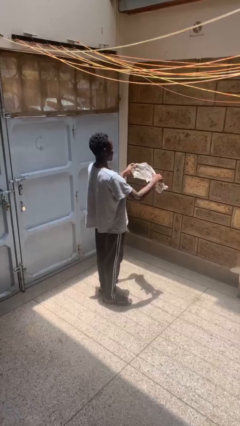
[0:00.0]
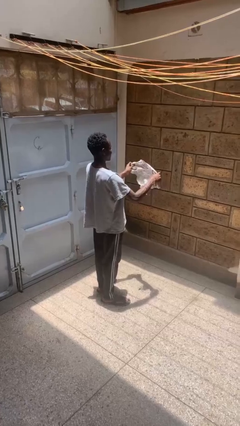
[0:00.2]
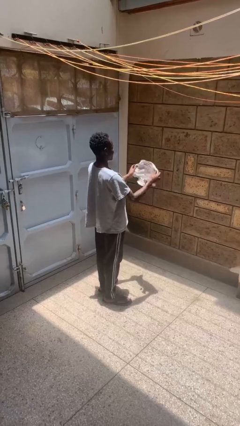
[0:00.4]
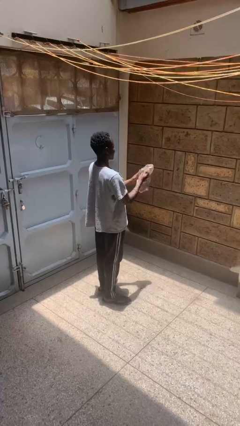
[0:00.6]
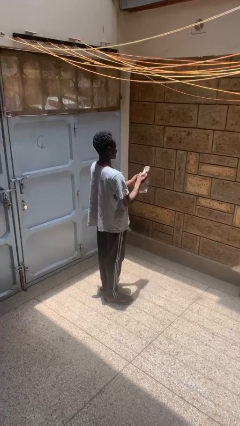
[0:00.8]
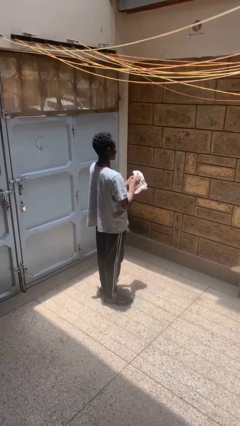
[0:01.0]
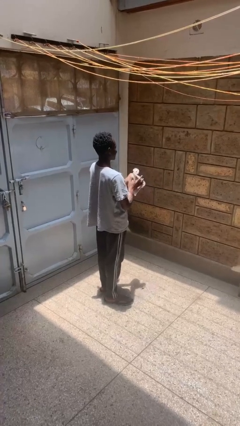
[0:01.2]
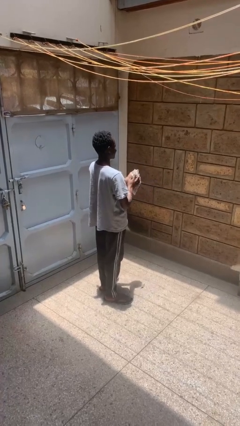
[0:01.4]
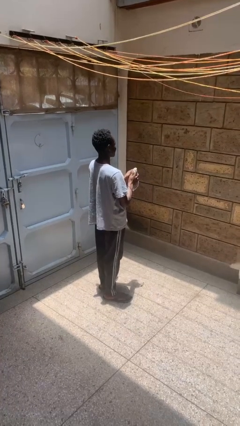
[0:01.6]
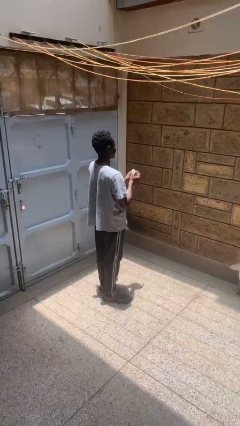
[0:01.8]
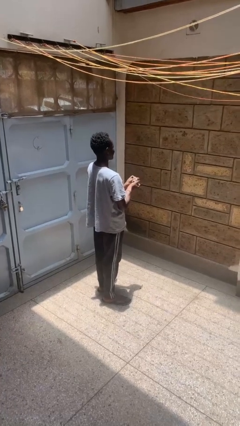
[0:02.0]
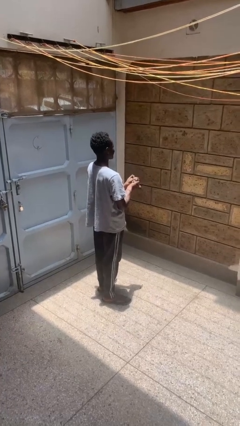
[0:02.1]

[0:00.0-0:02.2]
person crumples paper

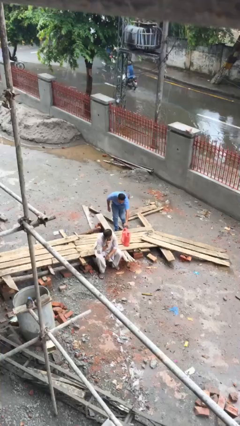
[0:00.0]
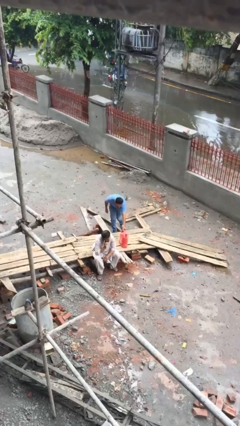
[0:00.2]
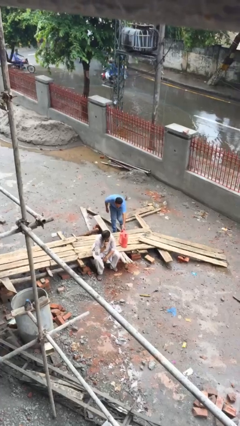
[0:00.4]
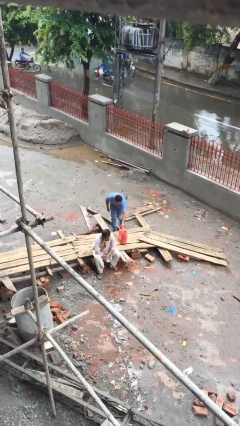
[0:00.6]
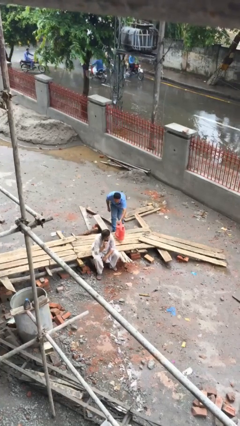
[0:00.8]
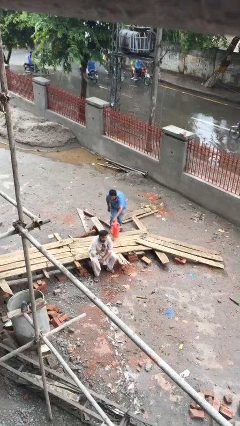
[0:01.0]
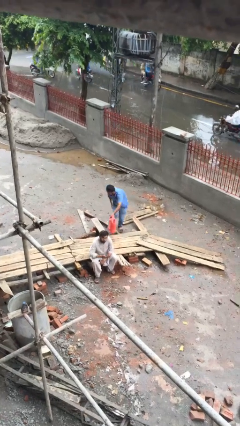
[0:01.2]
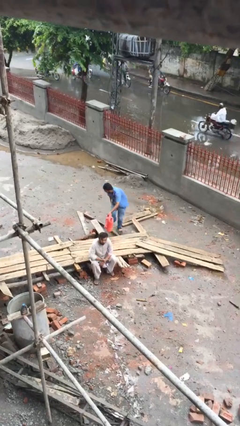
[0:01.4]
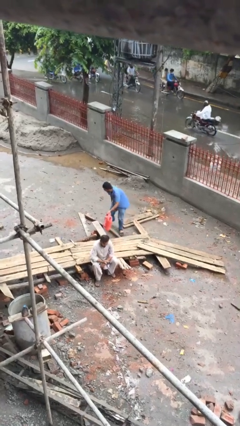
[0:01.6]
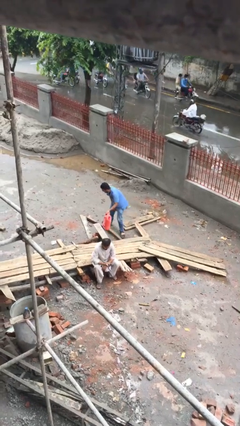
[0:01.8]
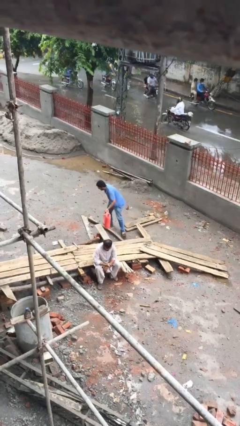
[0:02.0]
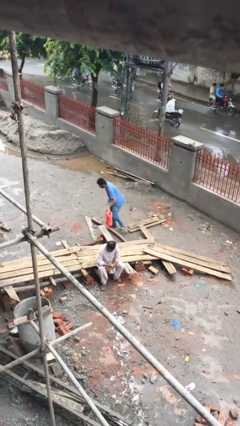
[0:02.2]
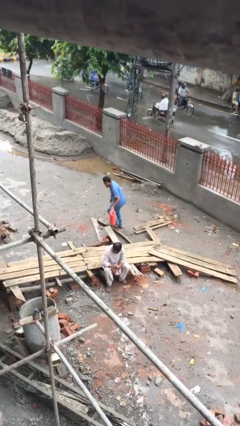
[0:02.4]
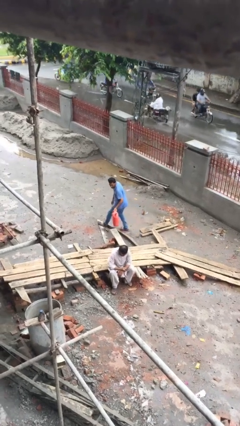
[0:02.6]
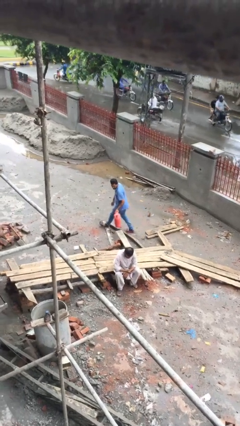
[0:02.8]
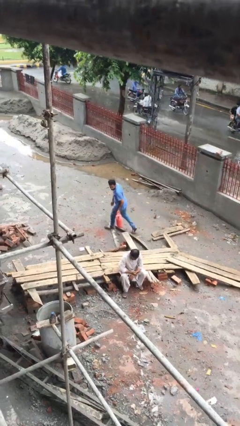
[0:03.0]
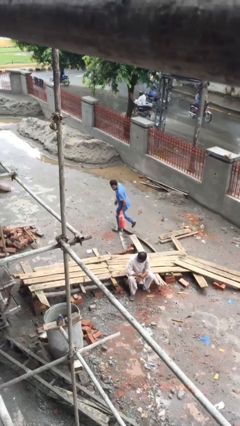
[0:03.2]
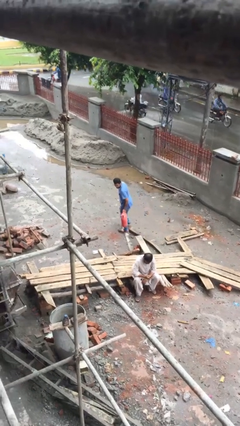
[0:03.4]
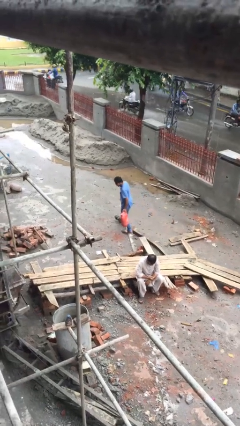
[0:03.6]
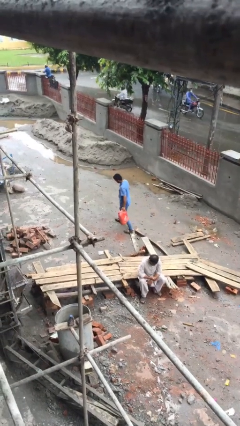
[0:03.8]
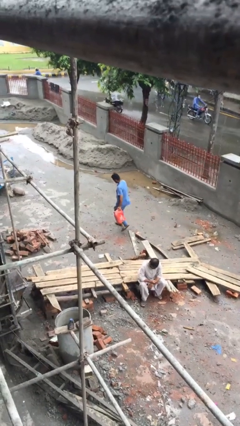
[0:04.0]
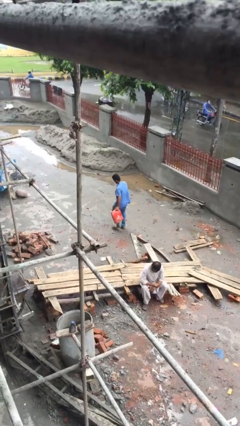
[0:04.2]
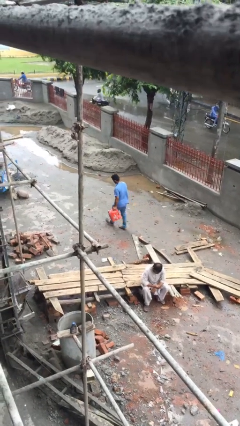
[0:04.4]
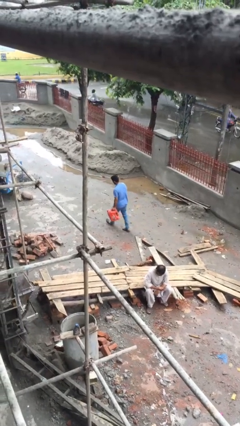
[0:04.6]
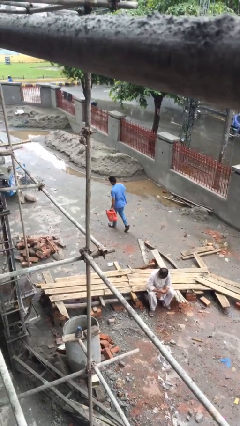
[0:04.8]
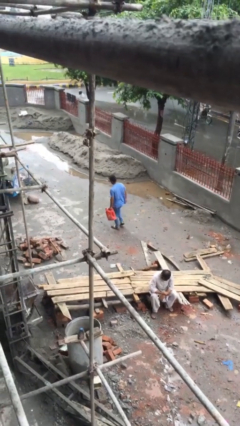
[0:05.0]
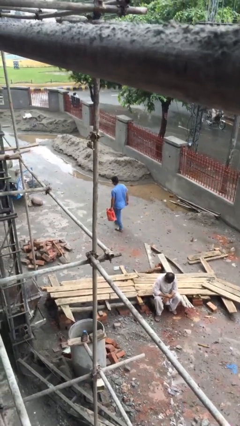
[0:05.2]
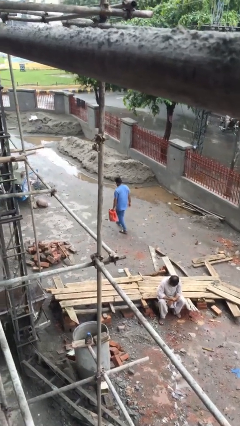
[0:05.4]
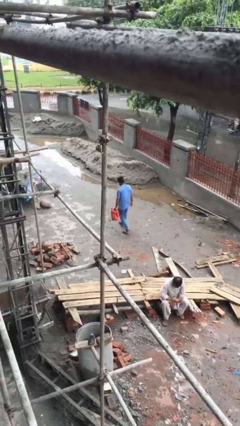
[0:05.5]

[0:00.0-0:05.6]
person steals object from person

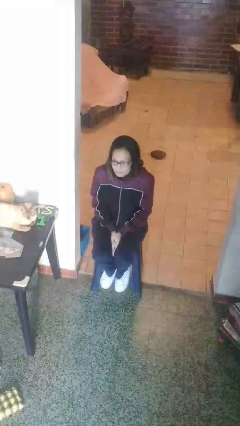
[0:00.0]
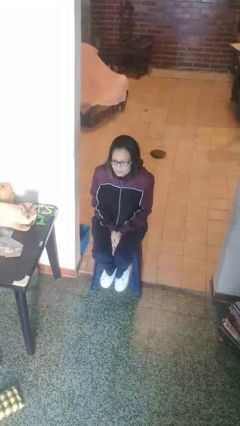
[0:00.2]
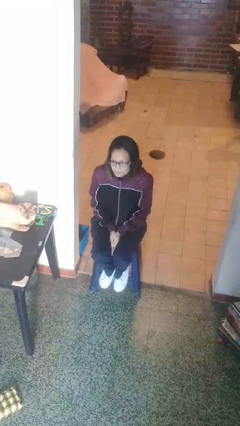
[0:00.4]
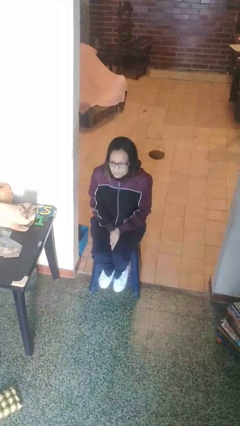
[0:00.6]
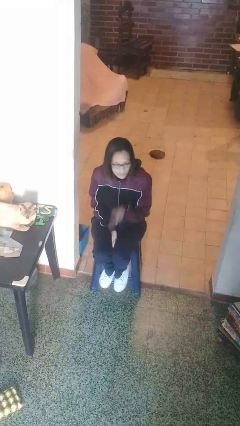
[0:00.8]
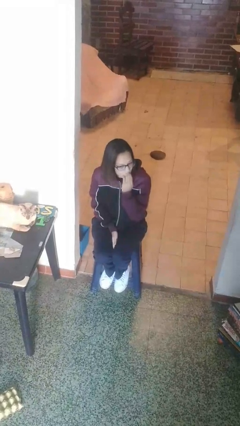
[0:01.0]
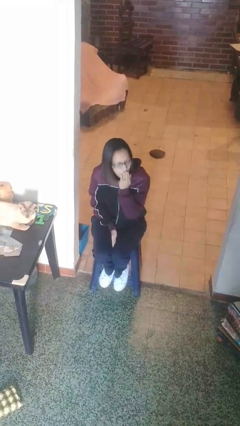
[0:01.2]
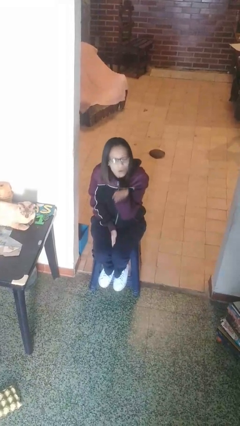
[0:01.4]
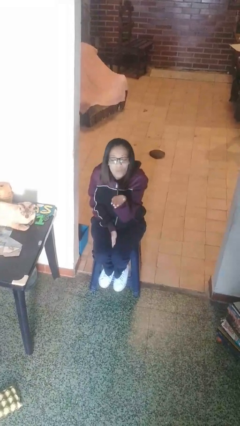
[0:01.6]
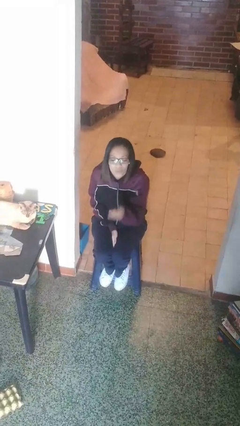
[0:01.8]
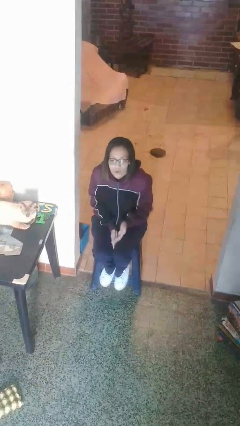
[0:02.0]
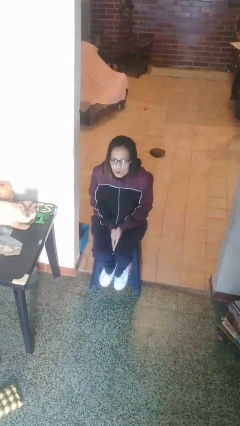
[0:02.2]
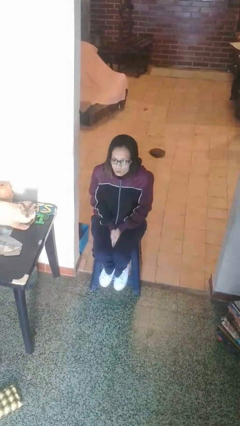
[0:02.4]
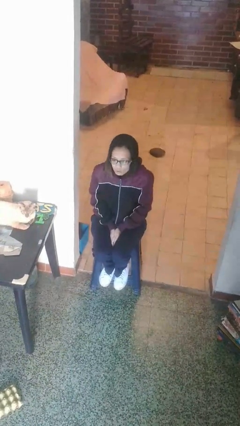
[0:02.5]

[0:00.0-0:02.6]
person gestures blow kiss

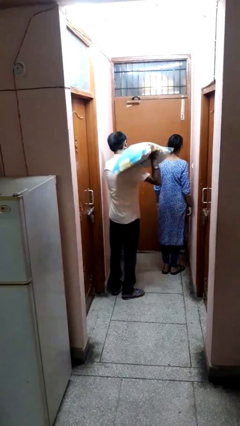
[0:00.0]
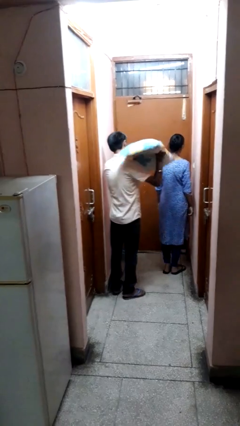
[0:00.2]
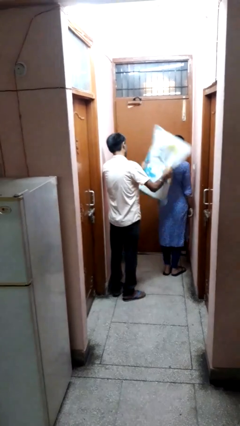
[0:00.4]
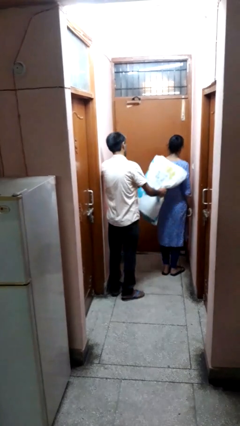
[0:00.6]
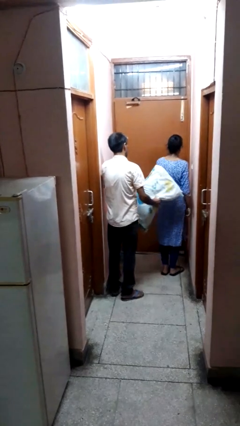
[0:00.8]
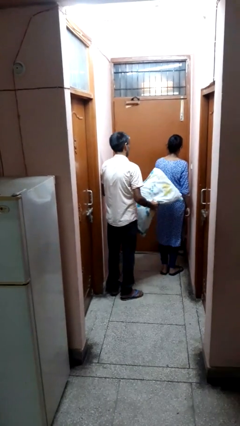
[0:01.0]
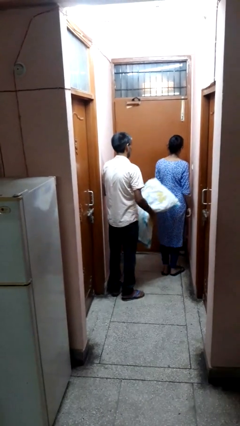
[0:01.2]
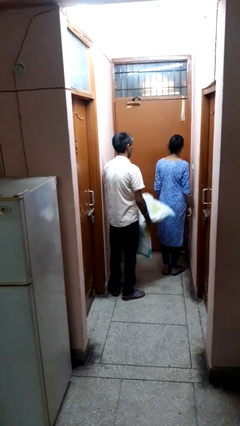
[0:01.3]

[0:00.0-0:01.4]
person hits person with pillow

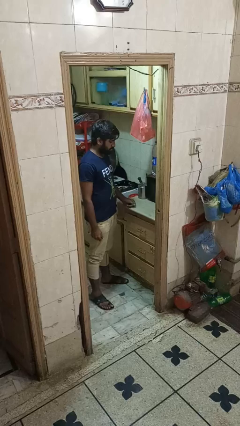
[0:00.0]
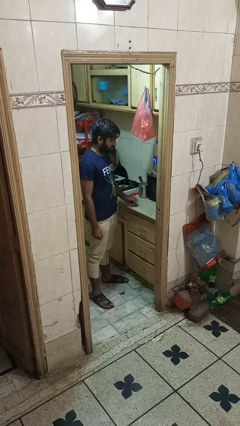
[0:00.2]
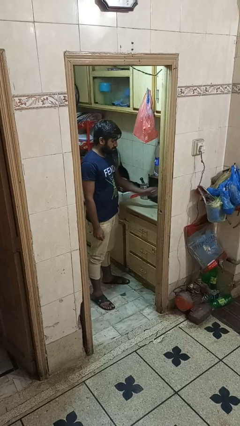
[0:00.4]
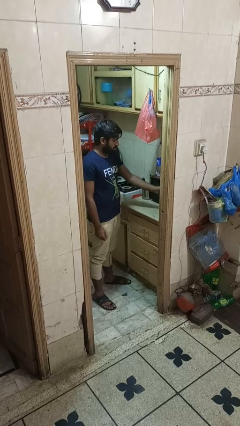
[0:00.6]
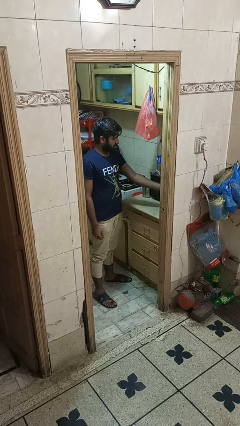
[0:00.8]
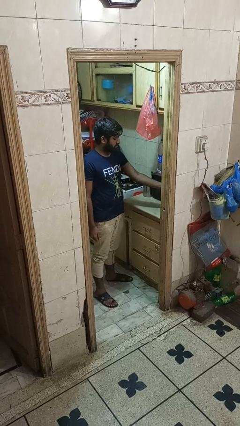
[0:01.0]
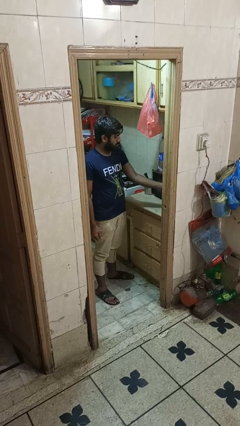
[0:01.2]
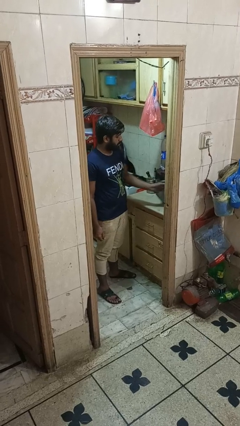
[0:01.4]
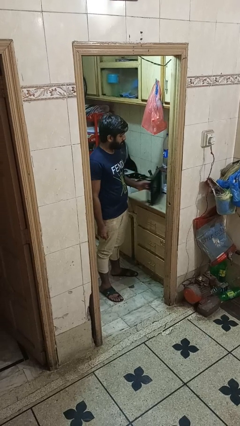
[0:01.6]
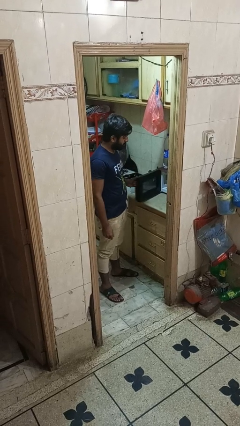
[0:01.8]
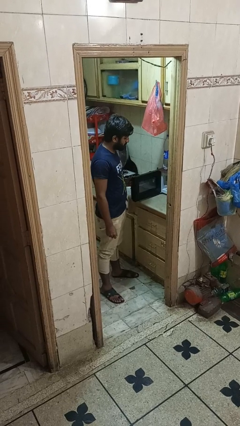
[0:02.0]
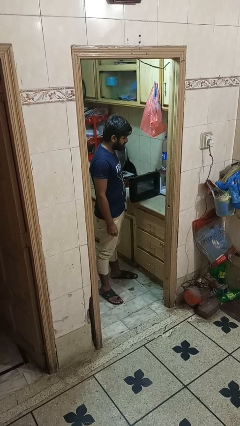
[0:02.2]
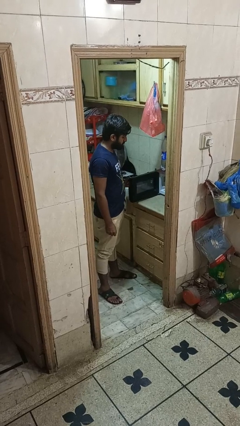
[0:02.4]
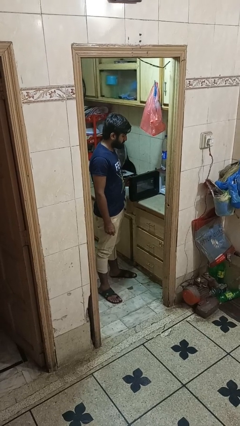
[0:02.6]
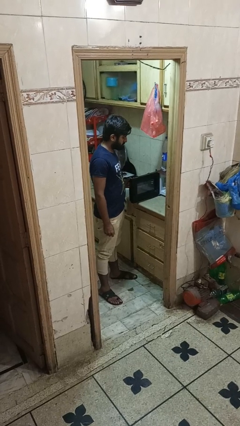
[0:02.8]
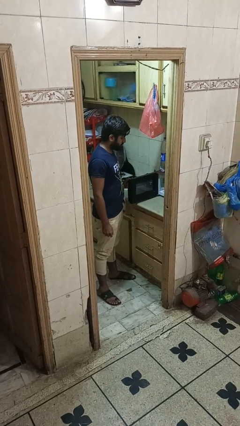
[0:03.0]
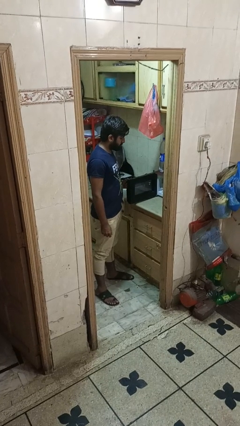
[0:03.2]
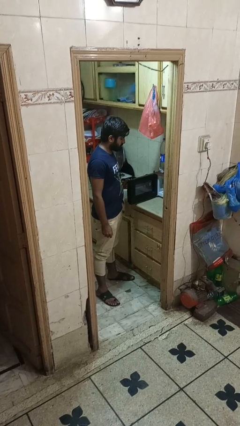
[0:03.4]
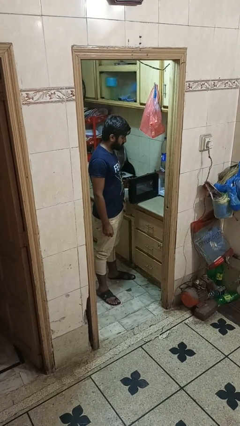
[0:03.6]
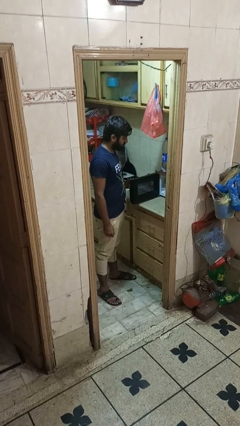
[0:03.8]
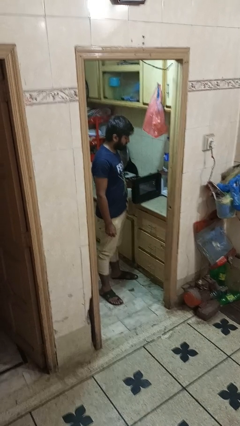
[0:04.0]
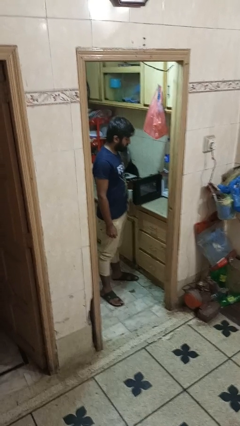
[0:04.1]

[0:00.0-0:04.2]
person opens oven door

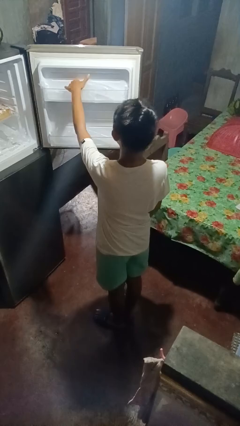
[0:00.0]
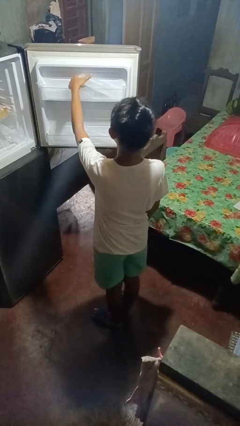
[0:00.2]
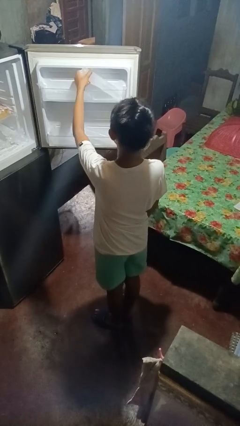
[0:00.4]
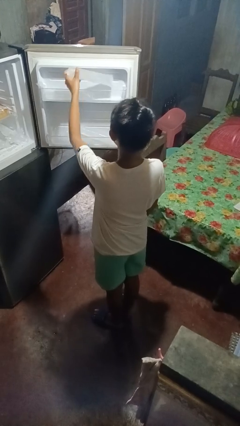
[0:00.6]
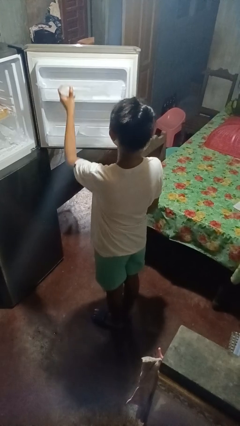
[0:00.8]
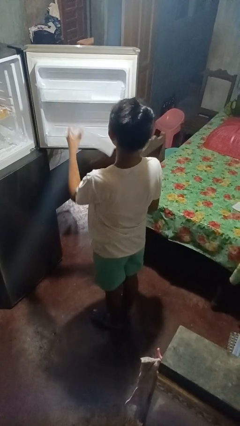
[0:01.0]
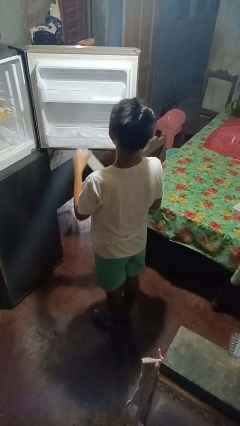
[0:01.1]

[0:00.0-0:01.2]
person takes object from refrigerator

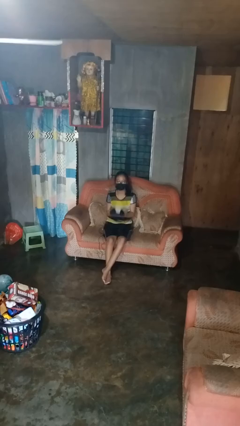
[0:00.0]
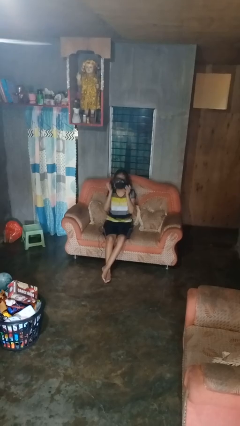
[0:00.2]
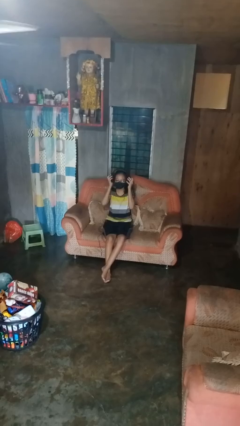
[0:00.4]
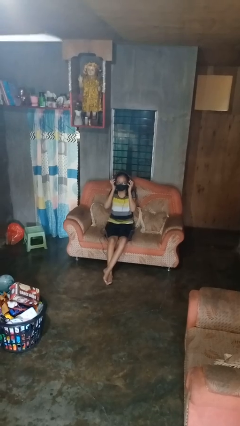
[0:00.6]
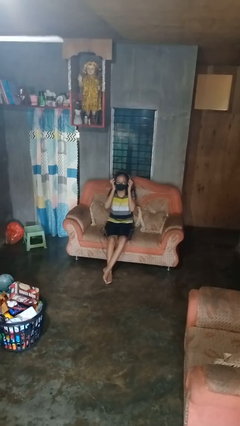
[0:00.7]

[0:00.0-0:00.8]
person puts on headphones
